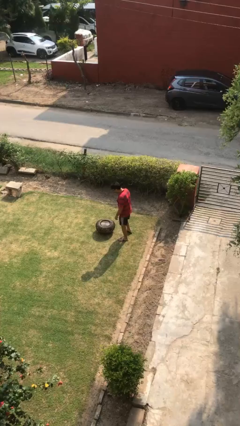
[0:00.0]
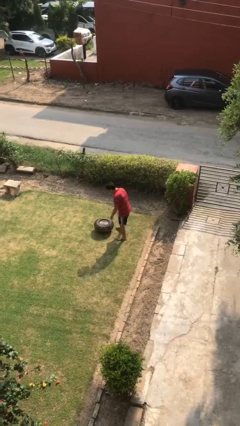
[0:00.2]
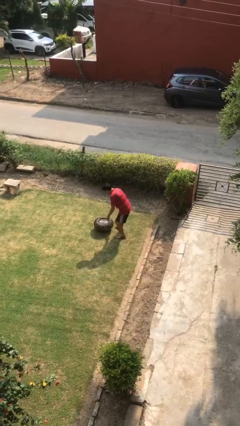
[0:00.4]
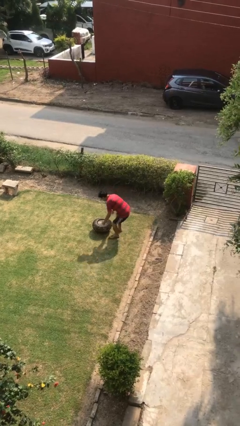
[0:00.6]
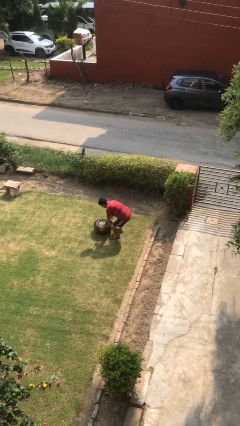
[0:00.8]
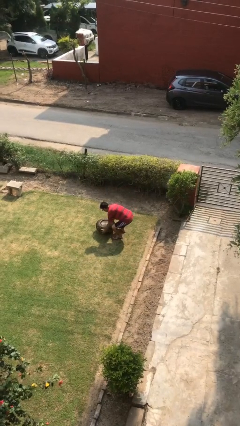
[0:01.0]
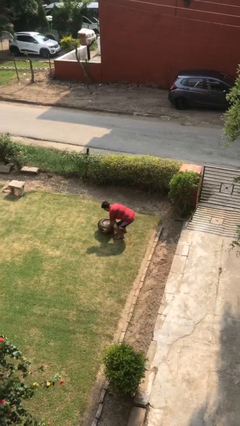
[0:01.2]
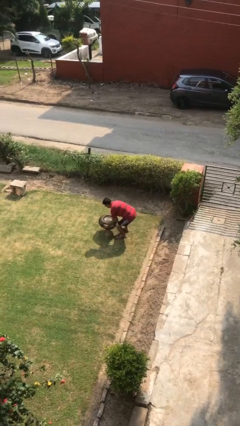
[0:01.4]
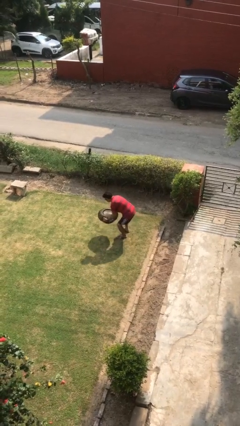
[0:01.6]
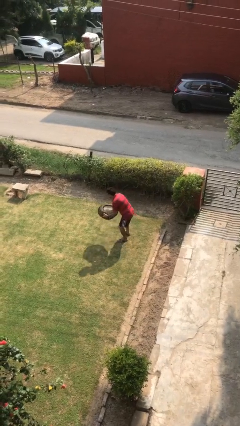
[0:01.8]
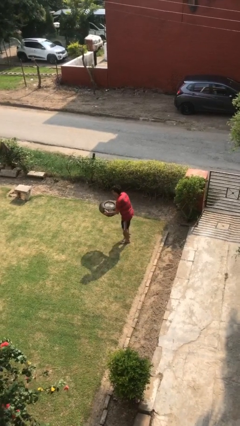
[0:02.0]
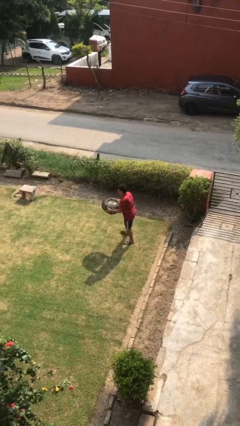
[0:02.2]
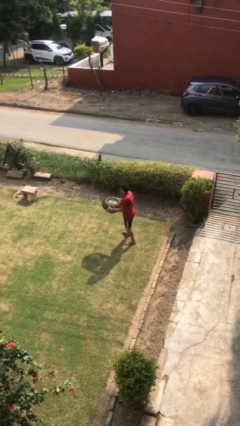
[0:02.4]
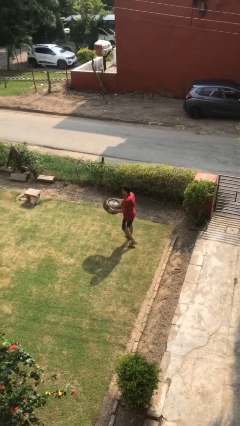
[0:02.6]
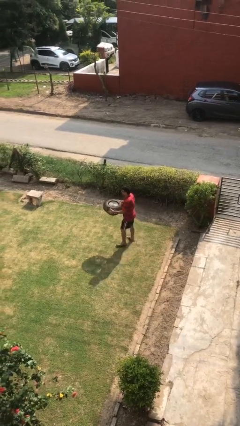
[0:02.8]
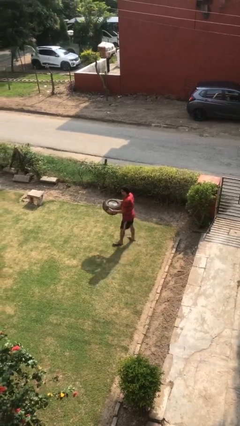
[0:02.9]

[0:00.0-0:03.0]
person picks up object from floor

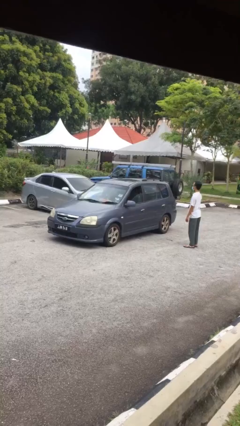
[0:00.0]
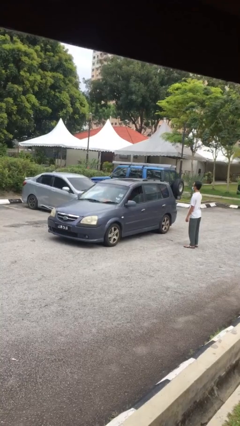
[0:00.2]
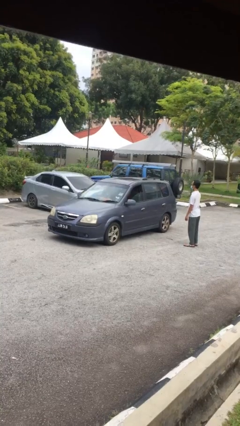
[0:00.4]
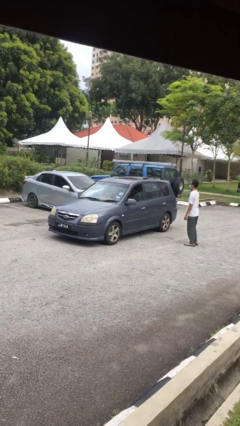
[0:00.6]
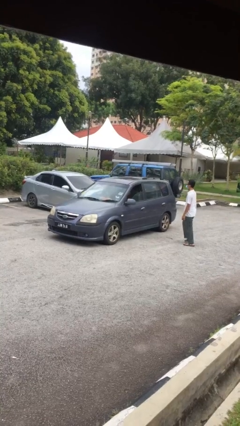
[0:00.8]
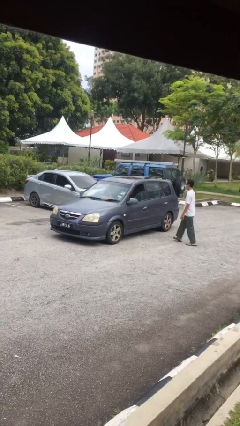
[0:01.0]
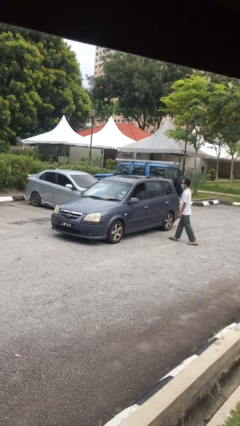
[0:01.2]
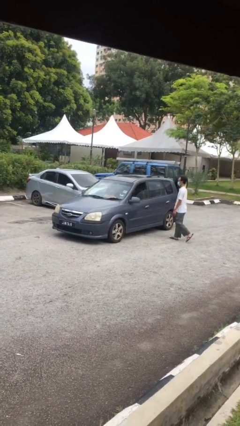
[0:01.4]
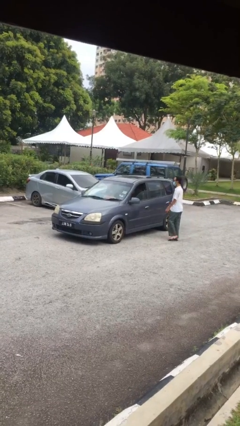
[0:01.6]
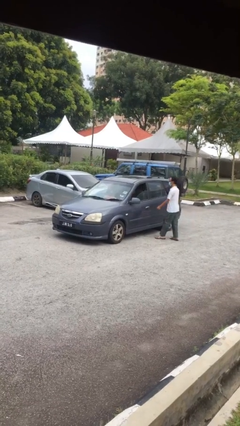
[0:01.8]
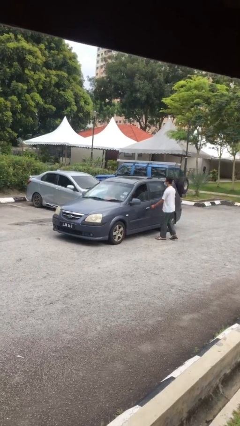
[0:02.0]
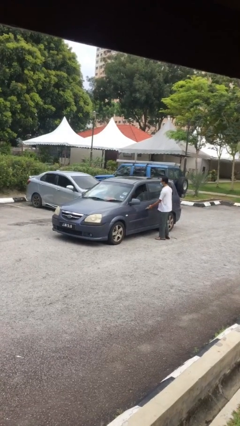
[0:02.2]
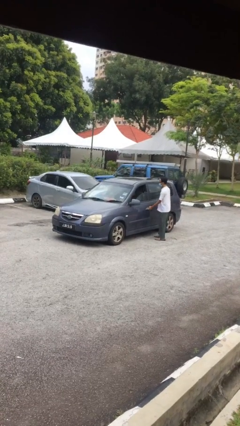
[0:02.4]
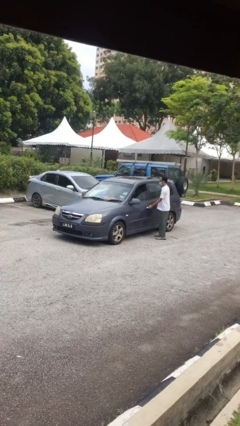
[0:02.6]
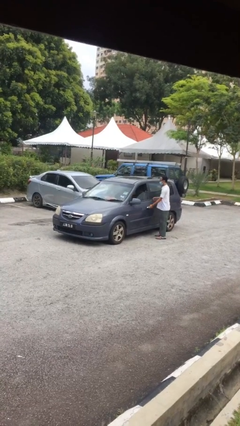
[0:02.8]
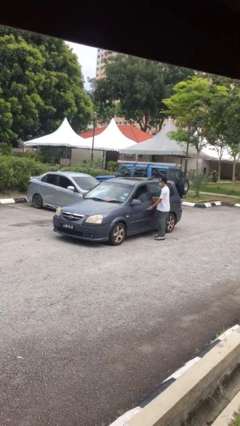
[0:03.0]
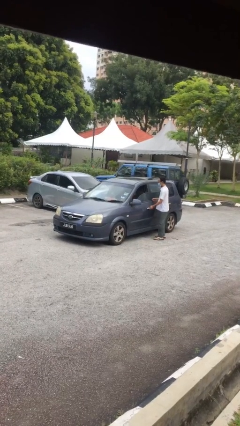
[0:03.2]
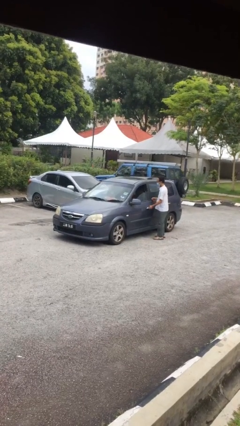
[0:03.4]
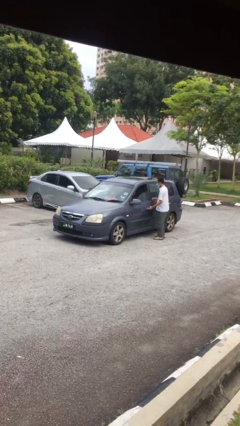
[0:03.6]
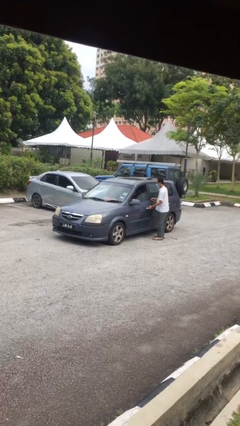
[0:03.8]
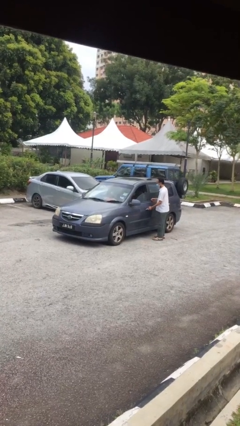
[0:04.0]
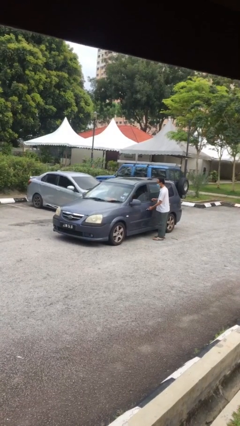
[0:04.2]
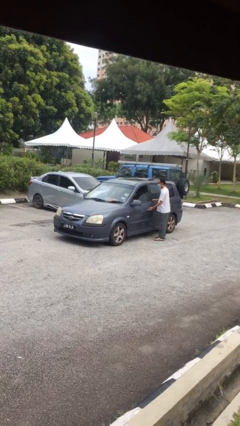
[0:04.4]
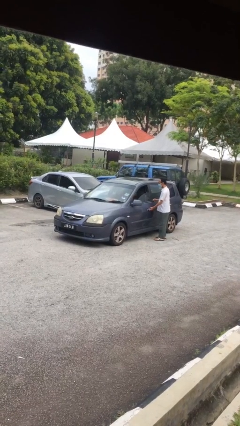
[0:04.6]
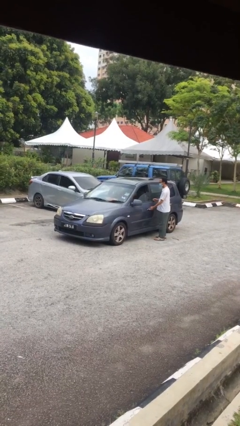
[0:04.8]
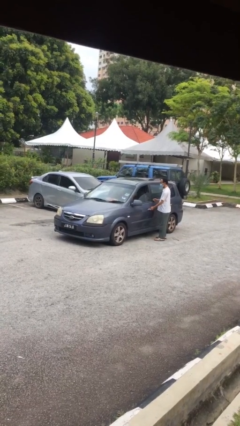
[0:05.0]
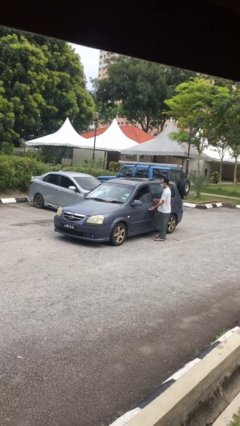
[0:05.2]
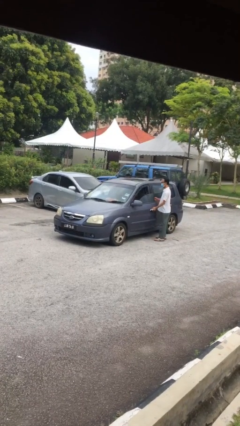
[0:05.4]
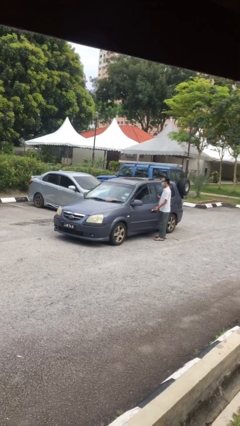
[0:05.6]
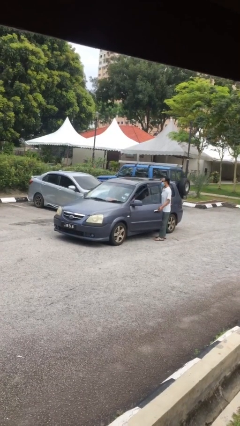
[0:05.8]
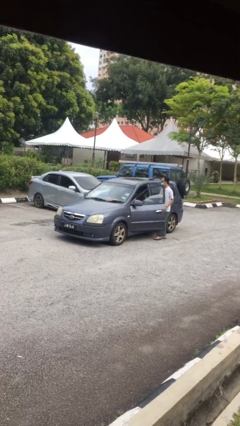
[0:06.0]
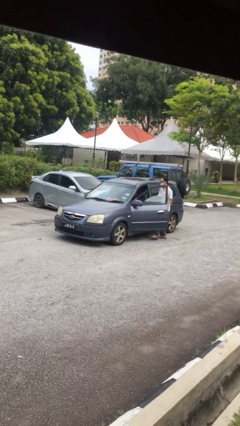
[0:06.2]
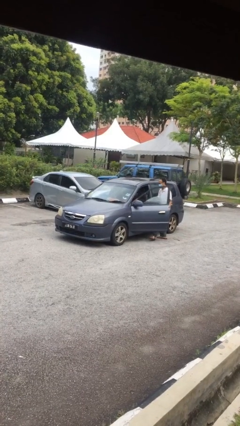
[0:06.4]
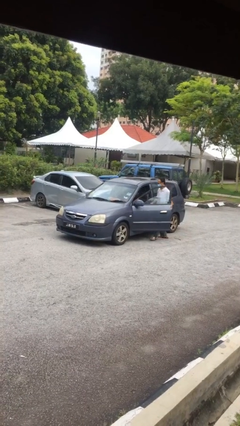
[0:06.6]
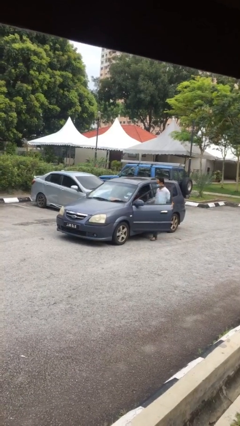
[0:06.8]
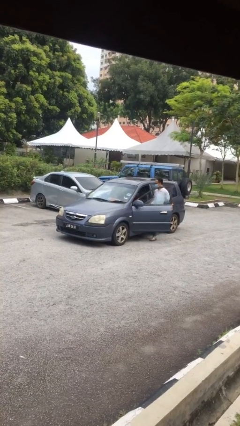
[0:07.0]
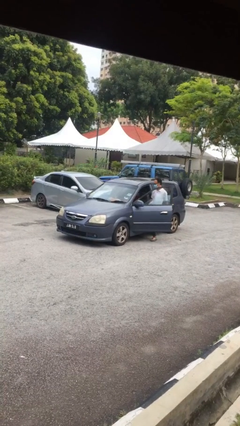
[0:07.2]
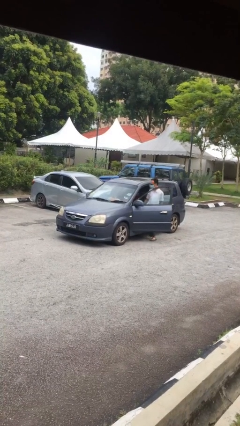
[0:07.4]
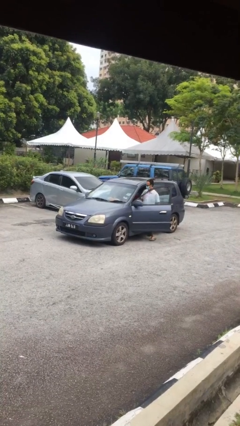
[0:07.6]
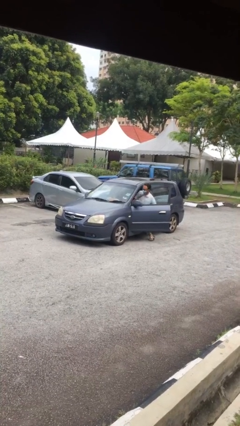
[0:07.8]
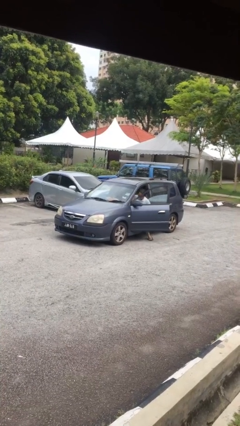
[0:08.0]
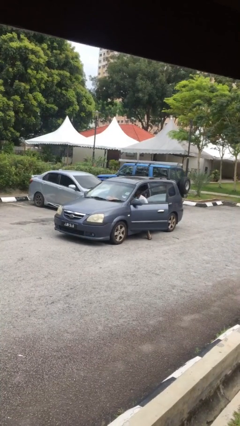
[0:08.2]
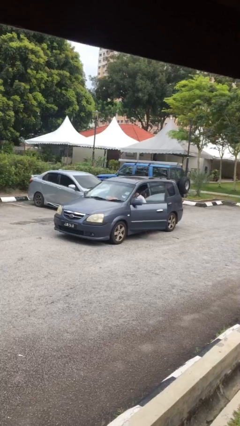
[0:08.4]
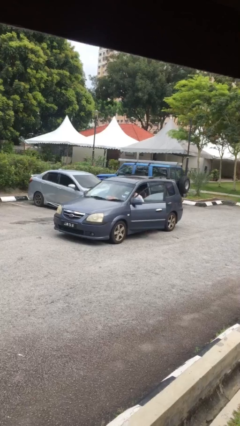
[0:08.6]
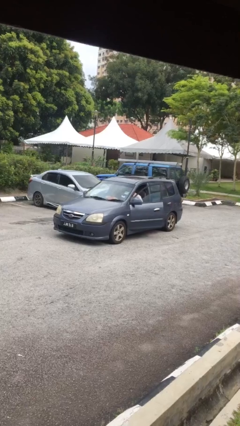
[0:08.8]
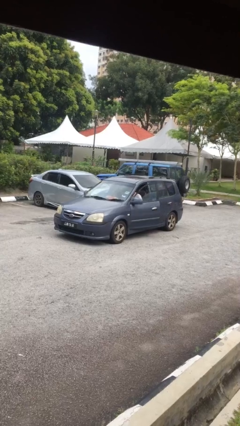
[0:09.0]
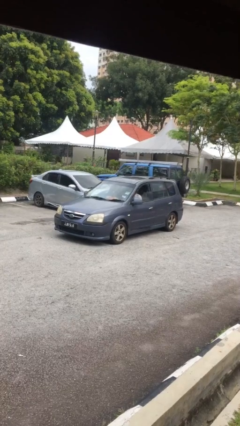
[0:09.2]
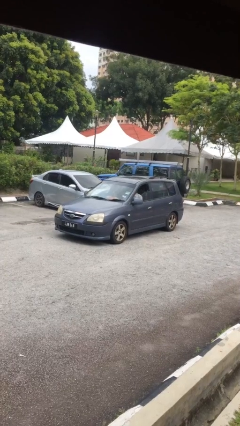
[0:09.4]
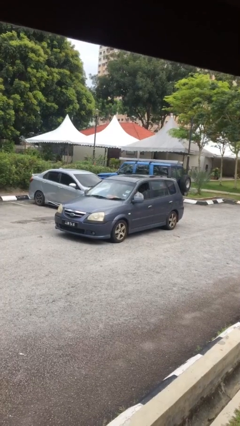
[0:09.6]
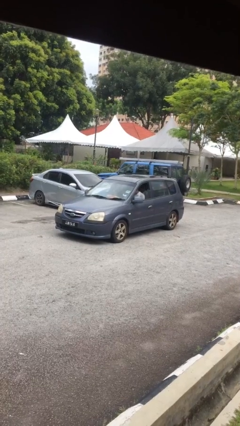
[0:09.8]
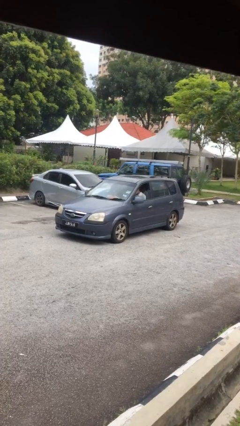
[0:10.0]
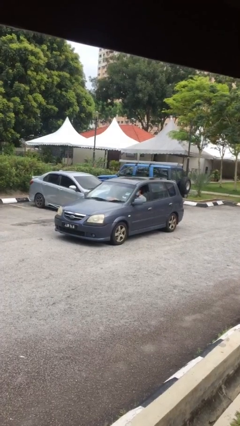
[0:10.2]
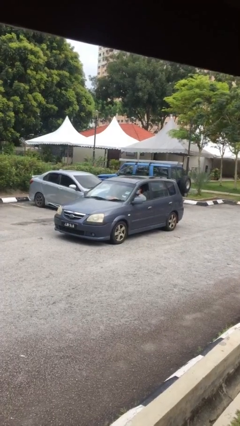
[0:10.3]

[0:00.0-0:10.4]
car picks up person

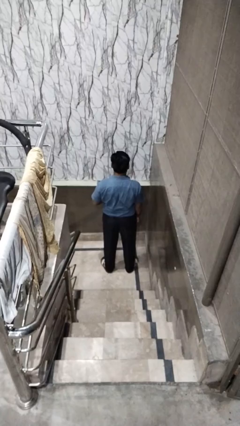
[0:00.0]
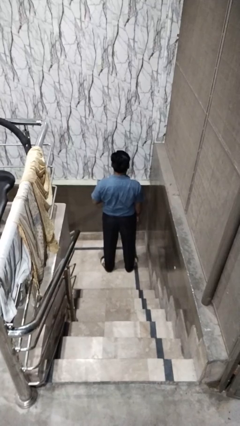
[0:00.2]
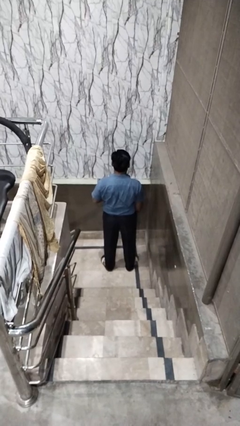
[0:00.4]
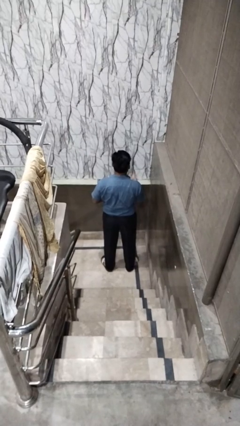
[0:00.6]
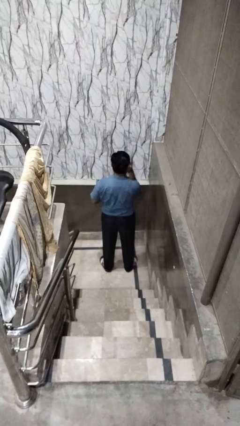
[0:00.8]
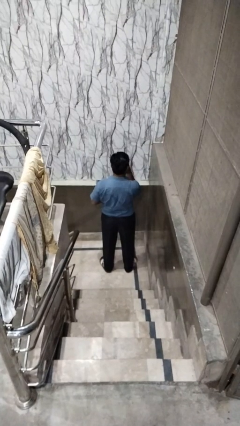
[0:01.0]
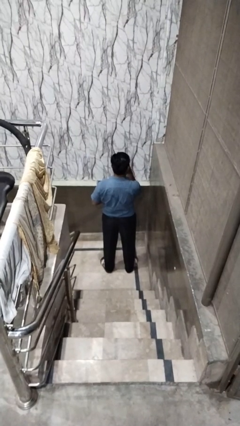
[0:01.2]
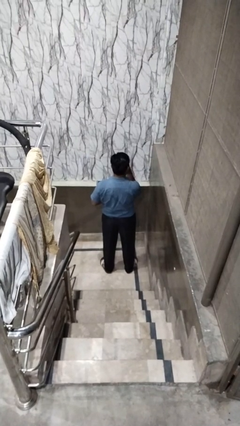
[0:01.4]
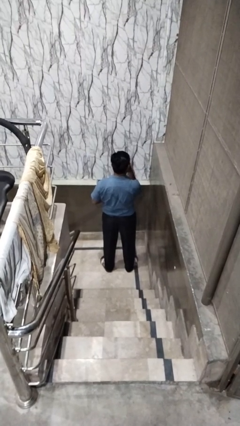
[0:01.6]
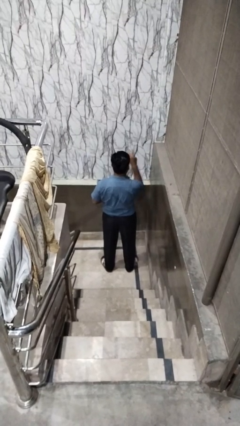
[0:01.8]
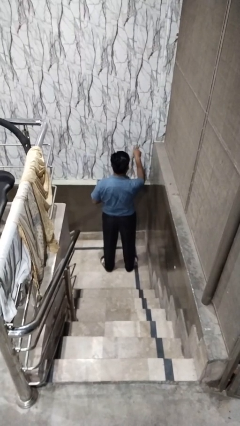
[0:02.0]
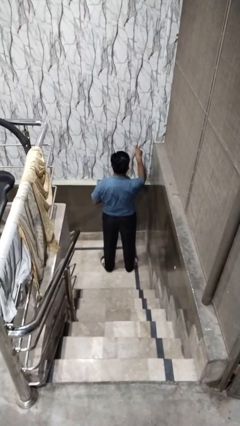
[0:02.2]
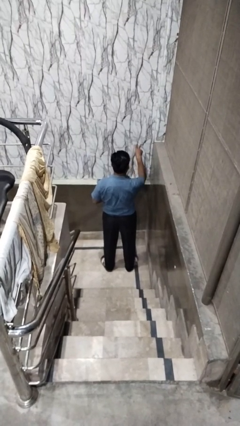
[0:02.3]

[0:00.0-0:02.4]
person gestures watch closely

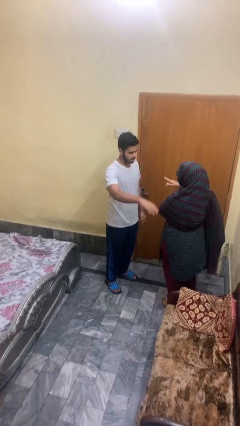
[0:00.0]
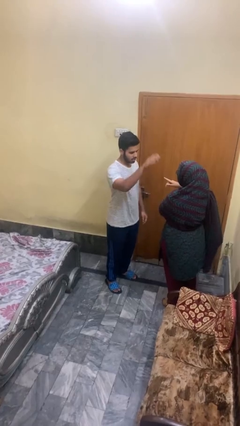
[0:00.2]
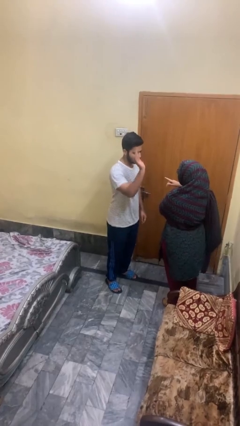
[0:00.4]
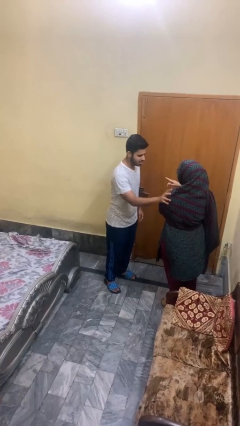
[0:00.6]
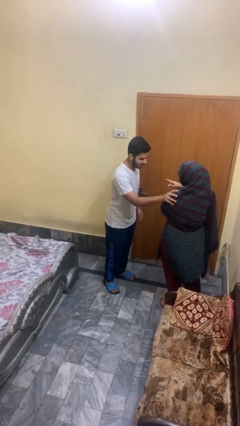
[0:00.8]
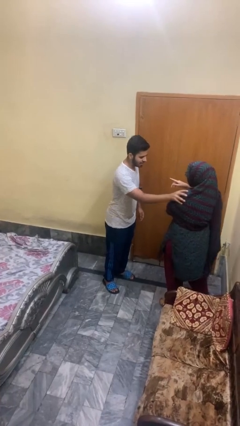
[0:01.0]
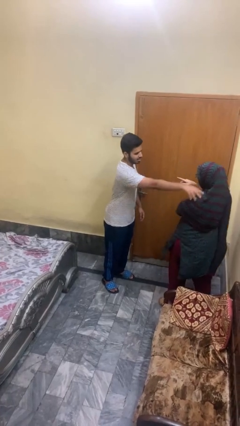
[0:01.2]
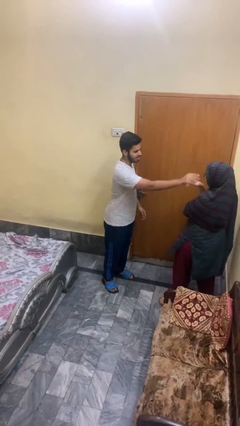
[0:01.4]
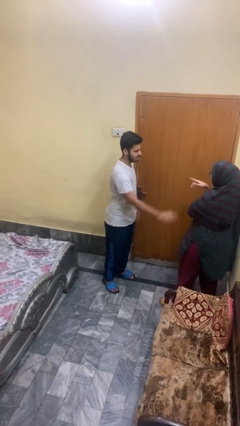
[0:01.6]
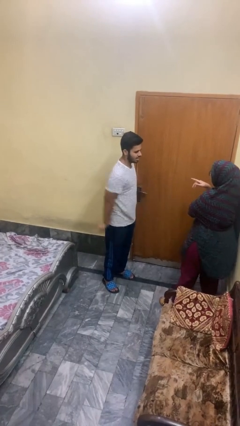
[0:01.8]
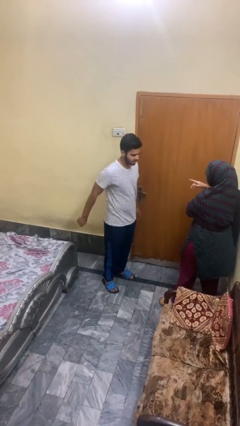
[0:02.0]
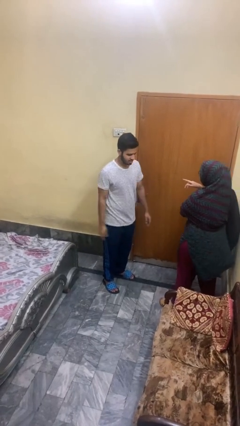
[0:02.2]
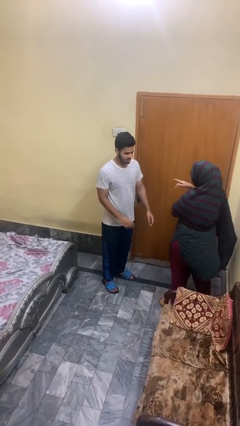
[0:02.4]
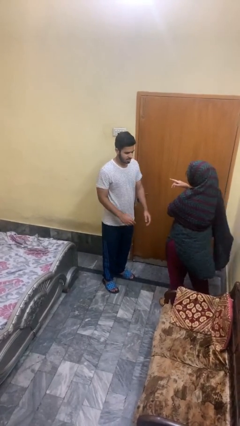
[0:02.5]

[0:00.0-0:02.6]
person shoves person
